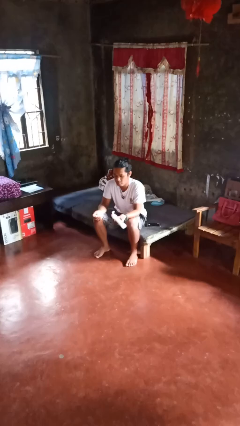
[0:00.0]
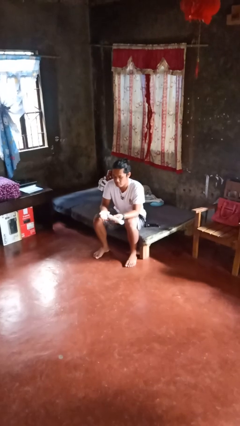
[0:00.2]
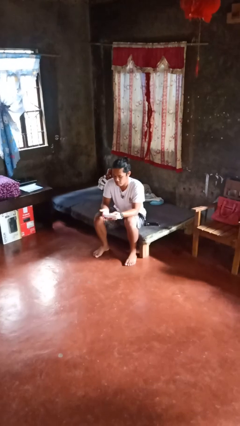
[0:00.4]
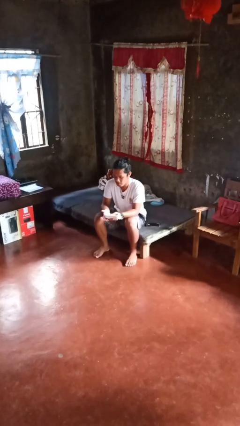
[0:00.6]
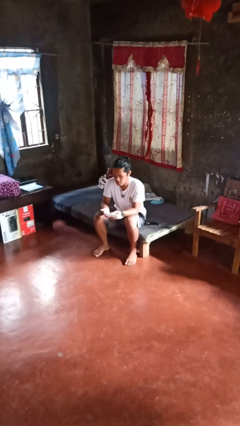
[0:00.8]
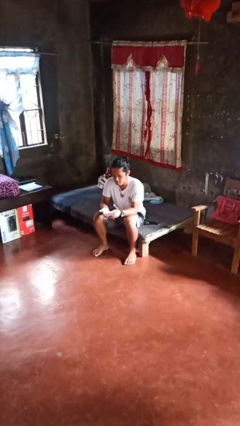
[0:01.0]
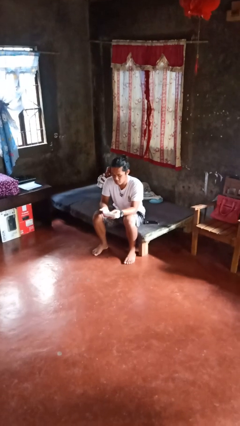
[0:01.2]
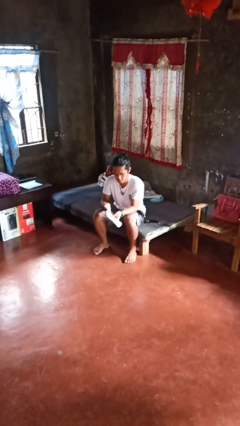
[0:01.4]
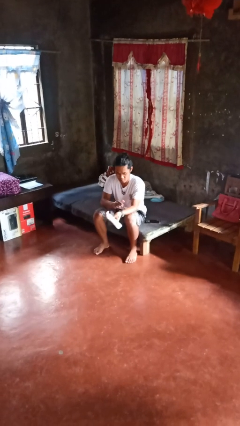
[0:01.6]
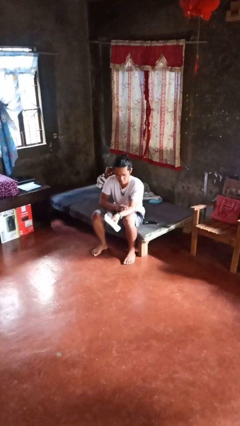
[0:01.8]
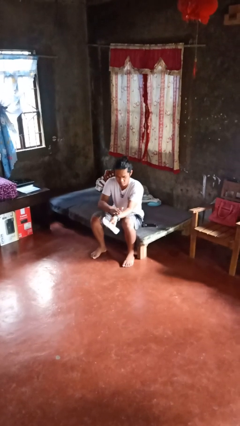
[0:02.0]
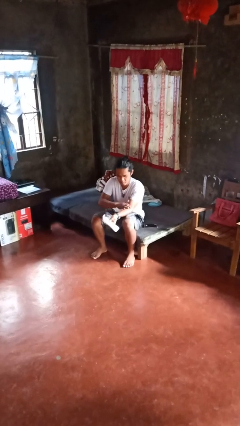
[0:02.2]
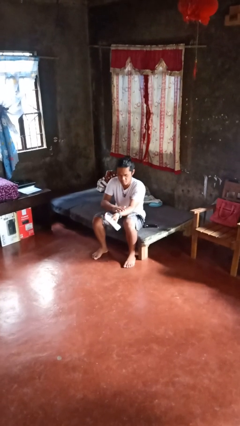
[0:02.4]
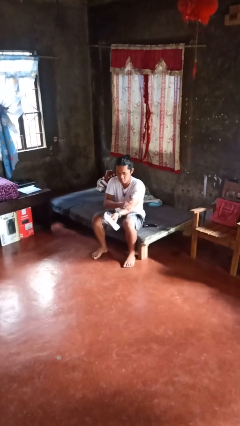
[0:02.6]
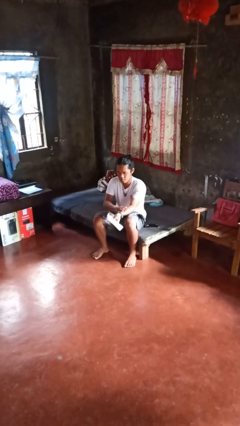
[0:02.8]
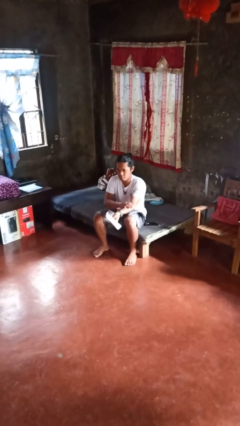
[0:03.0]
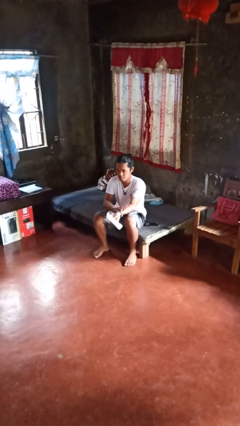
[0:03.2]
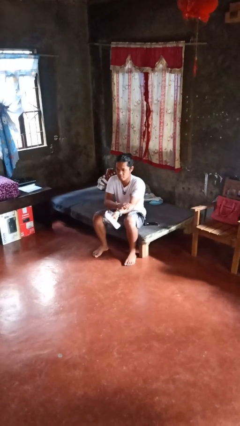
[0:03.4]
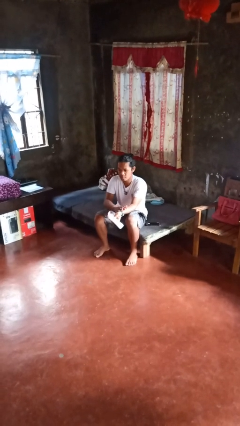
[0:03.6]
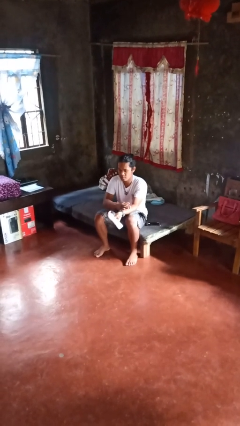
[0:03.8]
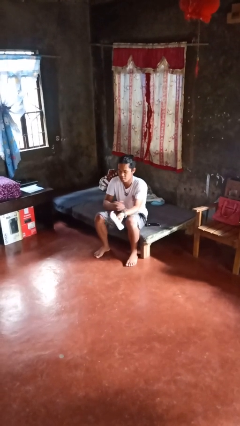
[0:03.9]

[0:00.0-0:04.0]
person applies sunscreen

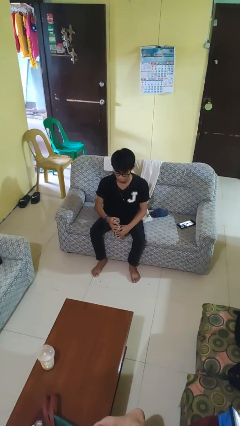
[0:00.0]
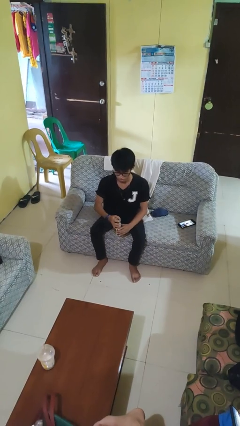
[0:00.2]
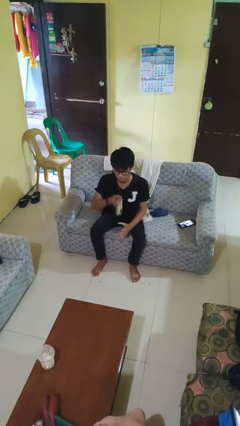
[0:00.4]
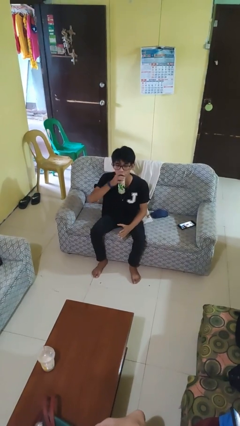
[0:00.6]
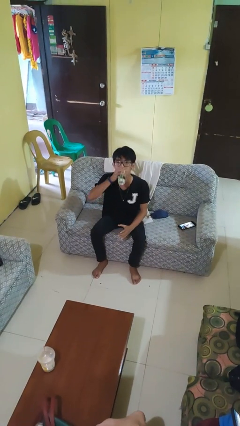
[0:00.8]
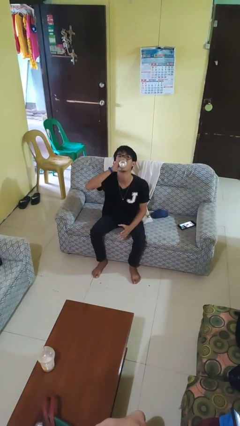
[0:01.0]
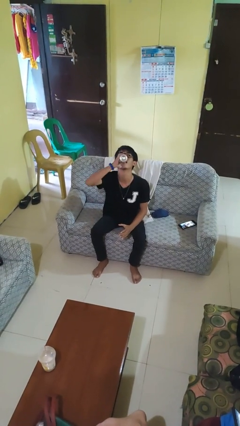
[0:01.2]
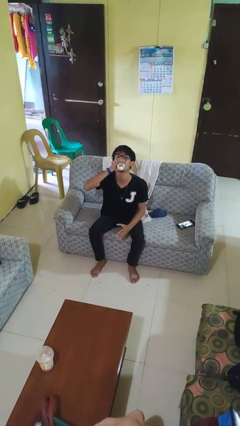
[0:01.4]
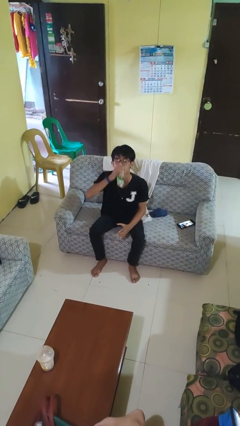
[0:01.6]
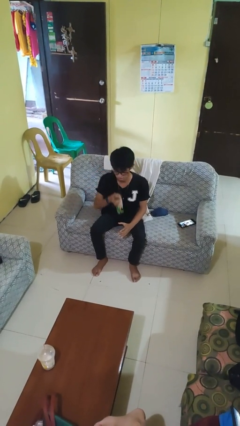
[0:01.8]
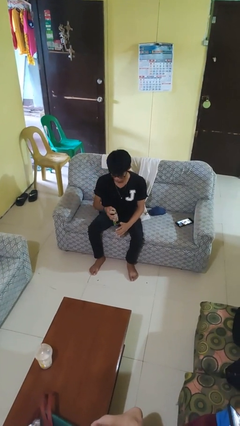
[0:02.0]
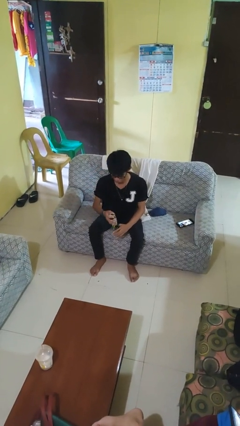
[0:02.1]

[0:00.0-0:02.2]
person drinks from beverage can

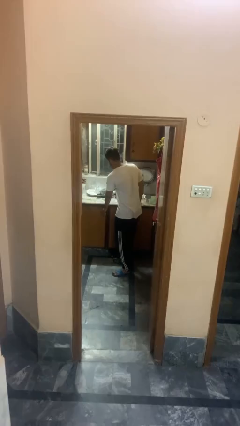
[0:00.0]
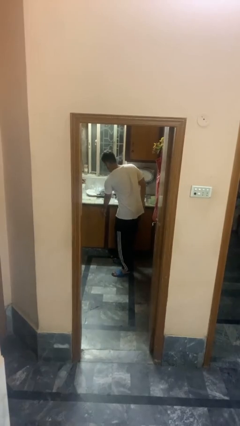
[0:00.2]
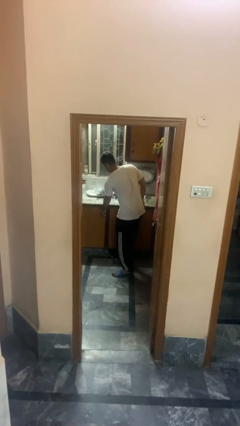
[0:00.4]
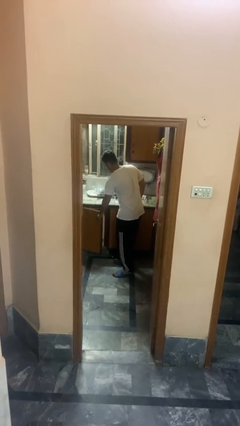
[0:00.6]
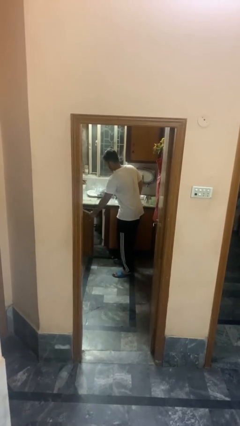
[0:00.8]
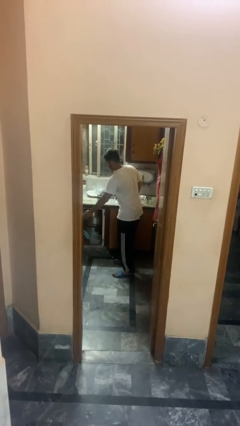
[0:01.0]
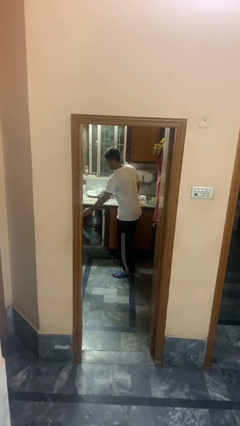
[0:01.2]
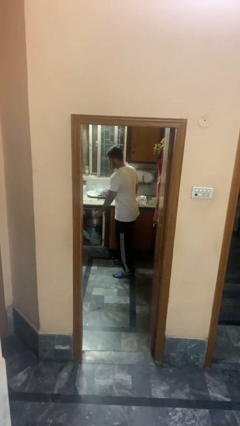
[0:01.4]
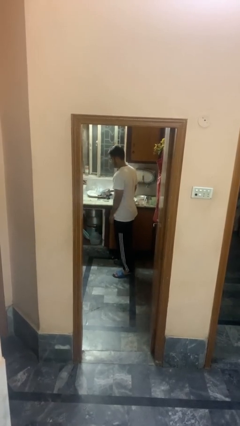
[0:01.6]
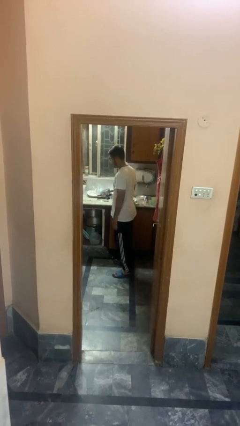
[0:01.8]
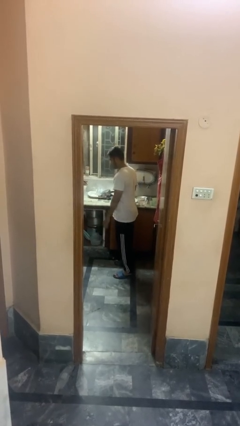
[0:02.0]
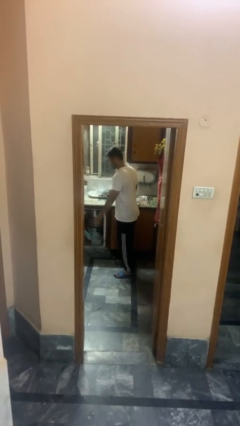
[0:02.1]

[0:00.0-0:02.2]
person opens cabinet

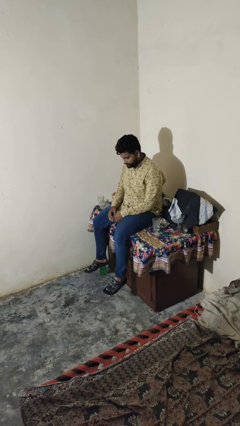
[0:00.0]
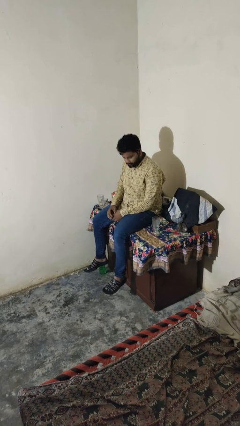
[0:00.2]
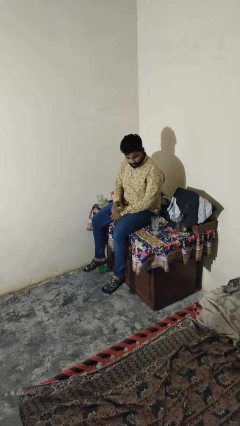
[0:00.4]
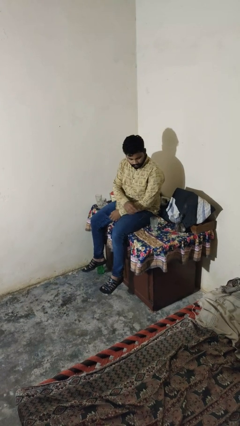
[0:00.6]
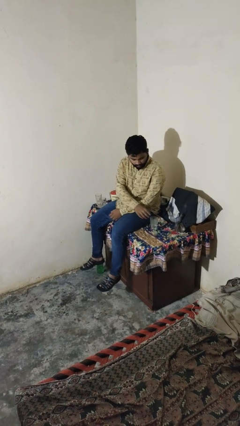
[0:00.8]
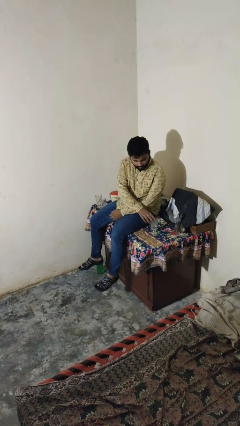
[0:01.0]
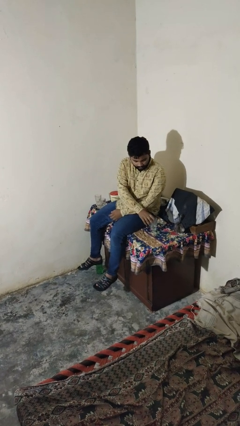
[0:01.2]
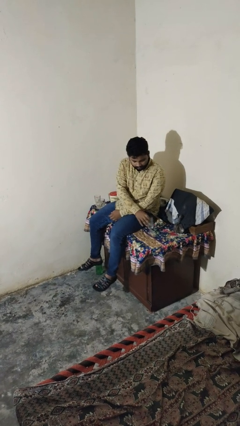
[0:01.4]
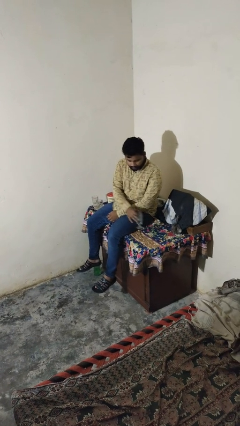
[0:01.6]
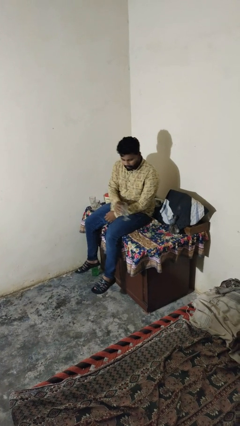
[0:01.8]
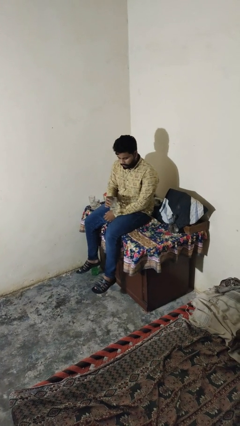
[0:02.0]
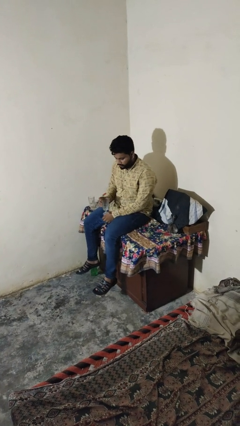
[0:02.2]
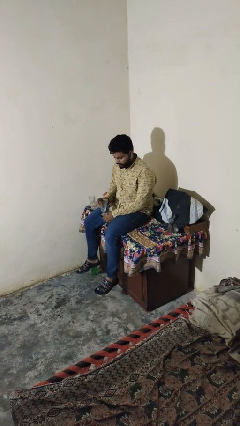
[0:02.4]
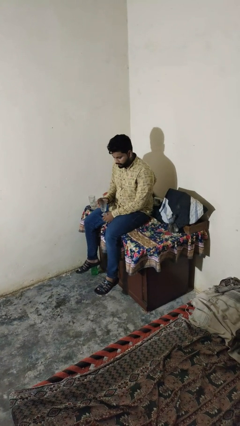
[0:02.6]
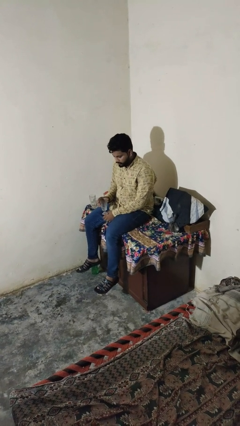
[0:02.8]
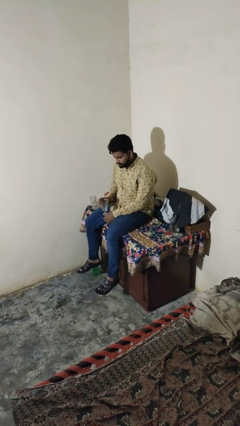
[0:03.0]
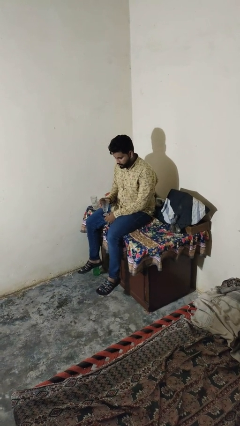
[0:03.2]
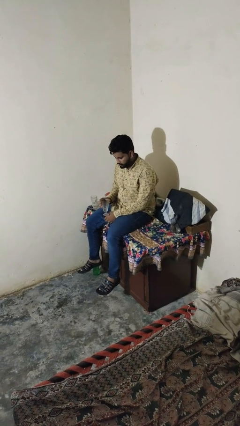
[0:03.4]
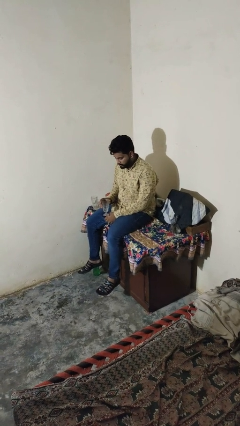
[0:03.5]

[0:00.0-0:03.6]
person picks up object from table

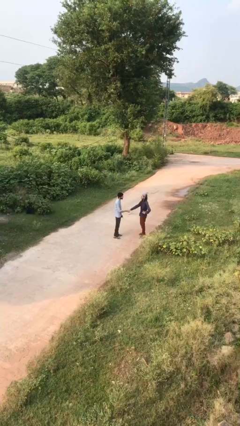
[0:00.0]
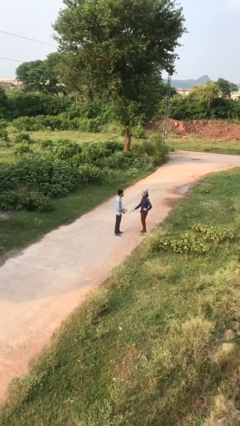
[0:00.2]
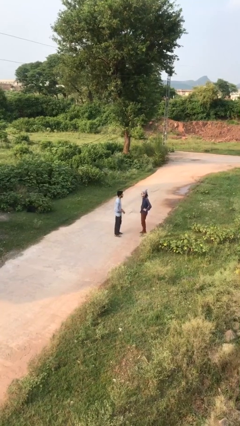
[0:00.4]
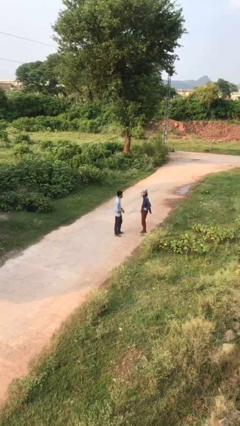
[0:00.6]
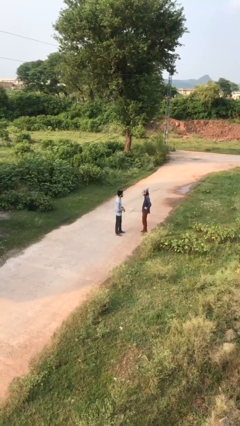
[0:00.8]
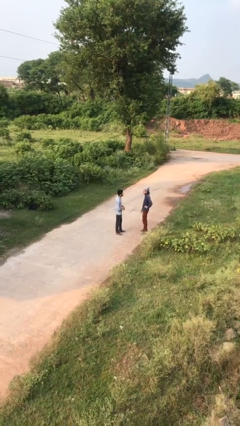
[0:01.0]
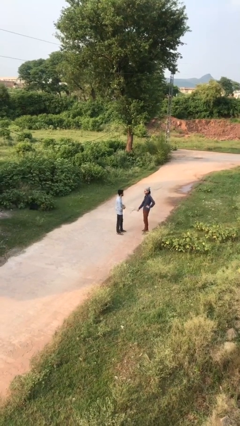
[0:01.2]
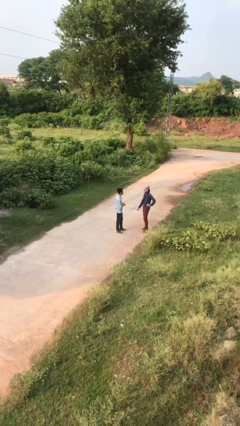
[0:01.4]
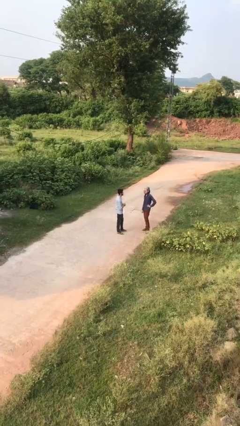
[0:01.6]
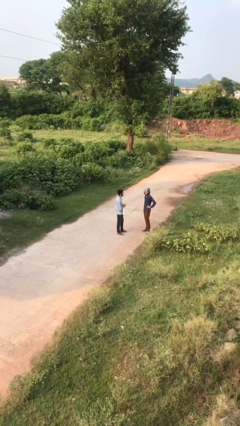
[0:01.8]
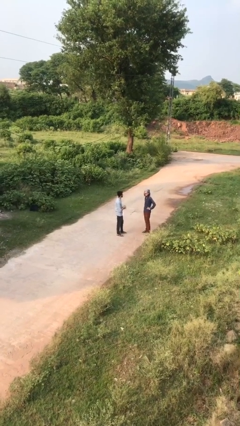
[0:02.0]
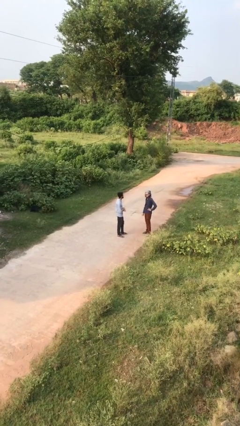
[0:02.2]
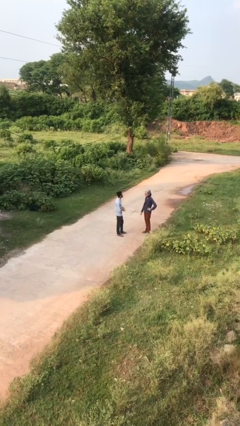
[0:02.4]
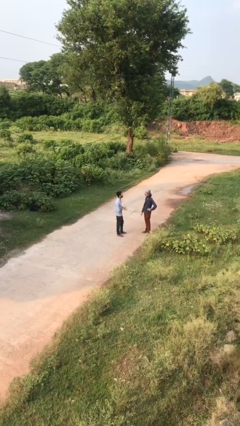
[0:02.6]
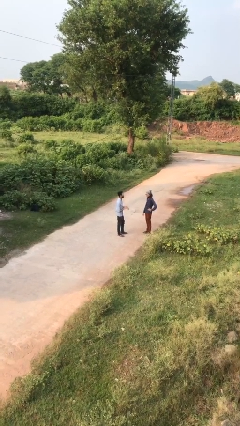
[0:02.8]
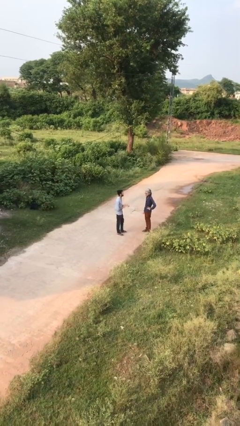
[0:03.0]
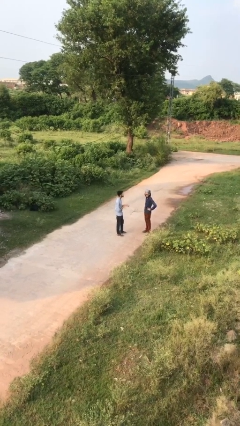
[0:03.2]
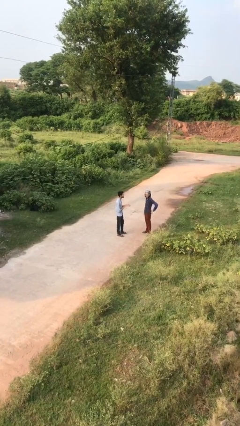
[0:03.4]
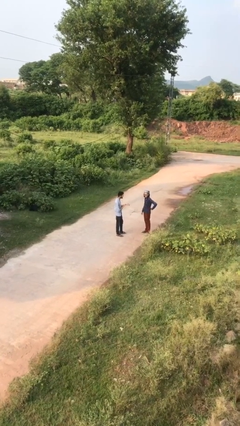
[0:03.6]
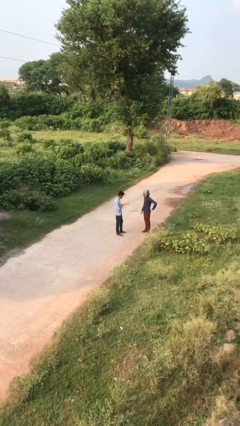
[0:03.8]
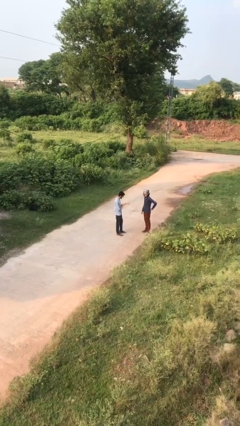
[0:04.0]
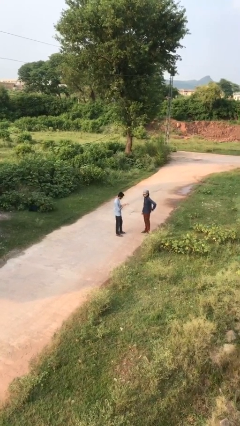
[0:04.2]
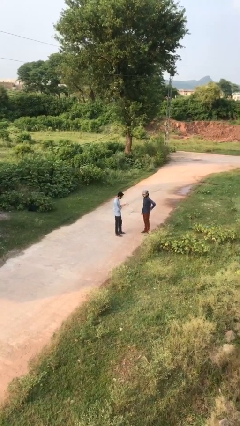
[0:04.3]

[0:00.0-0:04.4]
person talks to person

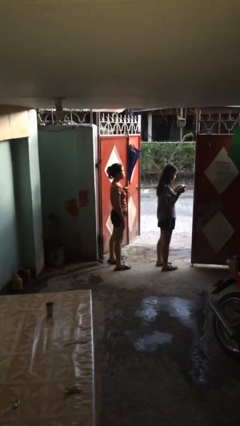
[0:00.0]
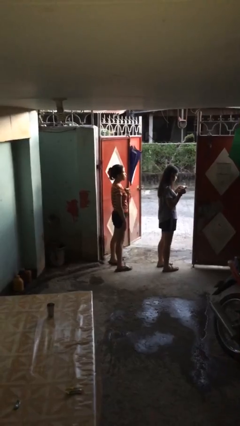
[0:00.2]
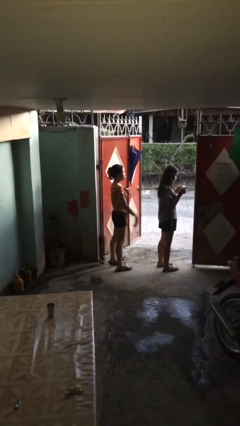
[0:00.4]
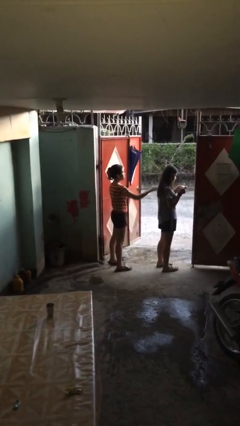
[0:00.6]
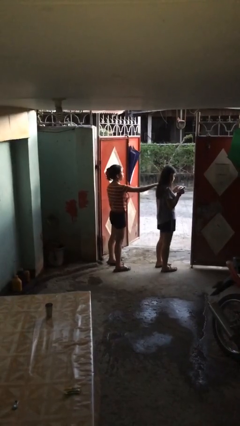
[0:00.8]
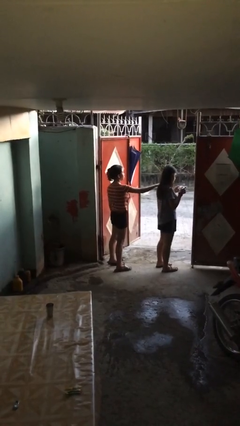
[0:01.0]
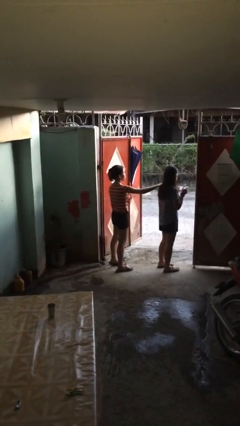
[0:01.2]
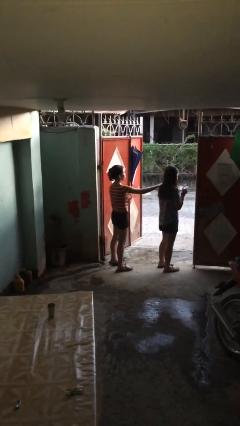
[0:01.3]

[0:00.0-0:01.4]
person grabs person by shoulder
